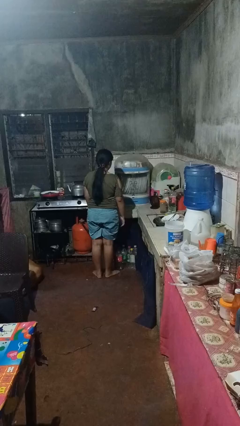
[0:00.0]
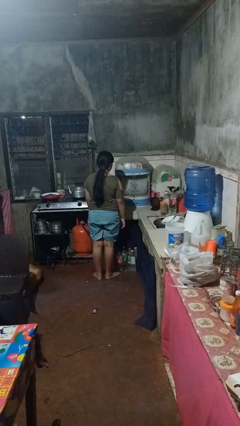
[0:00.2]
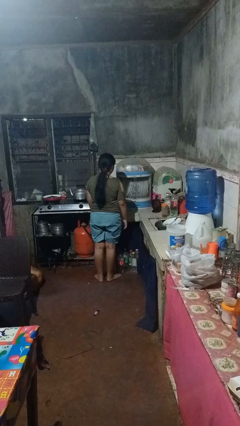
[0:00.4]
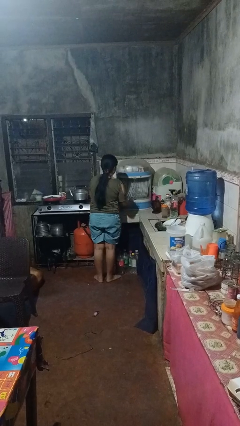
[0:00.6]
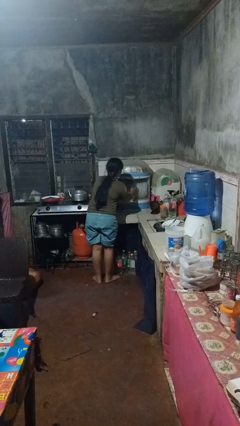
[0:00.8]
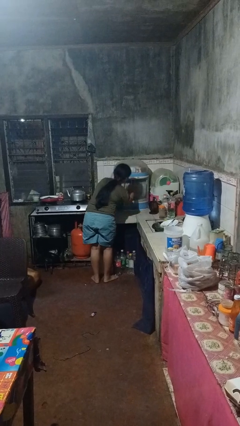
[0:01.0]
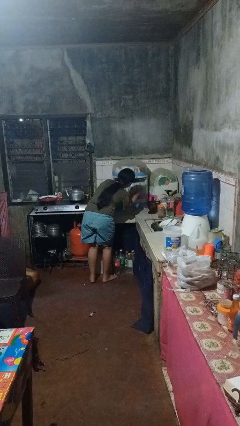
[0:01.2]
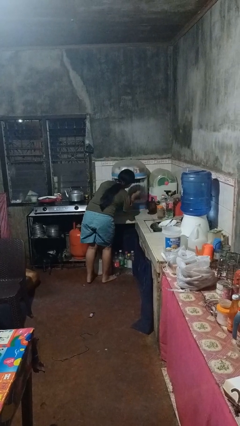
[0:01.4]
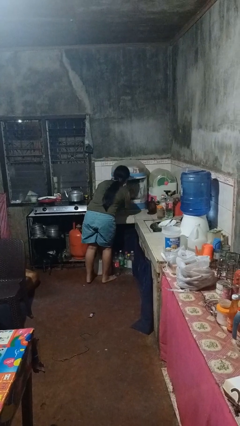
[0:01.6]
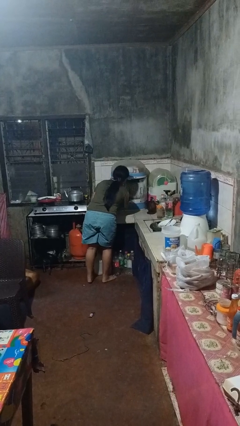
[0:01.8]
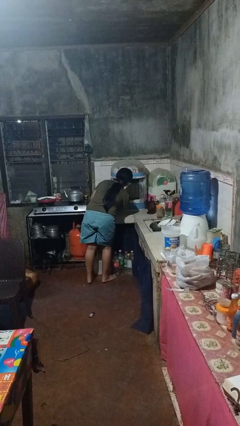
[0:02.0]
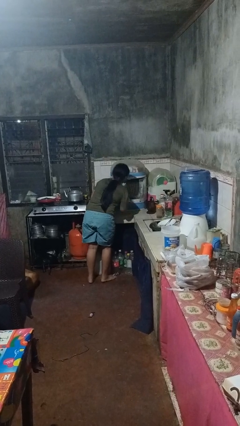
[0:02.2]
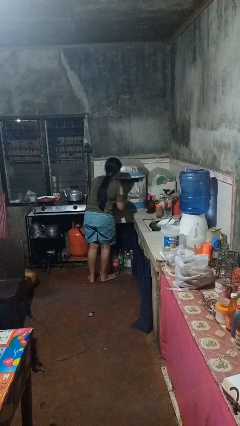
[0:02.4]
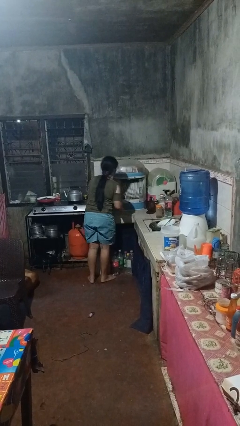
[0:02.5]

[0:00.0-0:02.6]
person searches in kitchen drawer

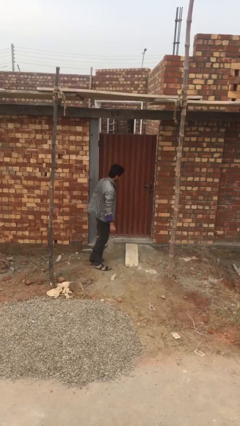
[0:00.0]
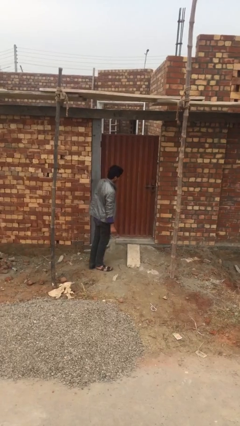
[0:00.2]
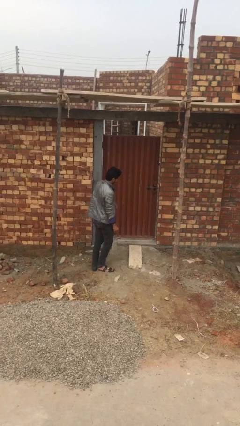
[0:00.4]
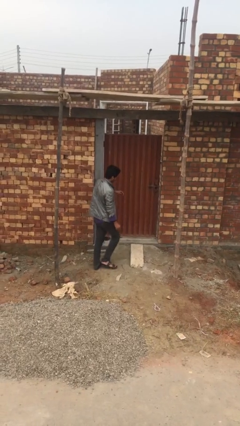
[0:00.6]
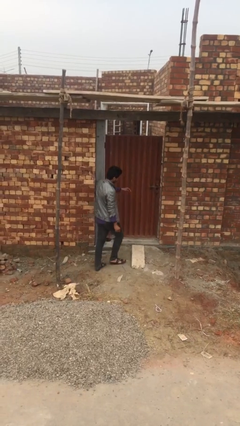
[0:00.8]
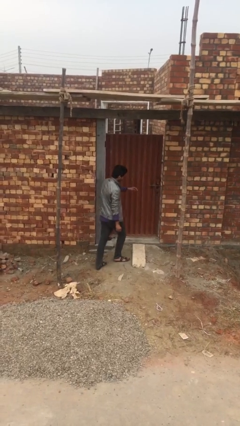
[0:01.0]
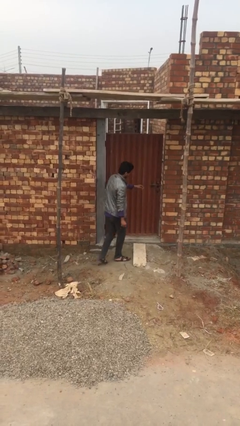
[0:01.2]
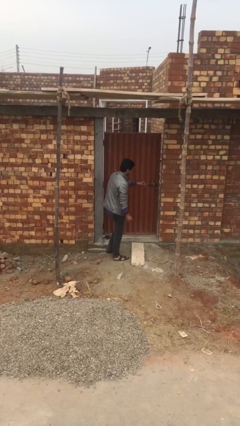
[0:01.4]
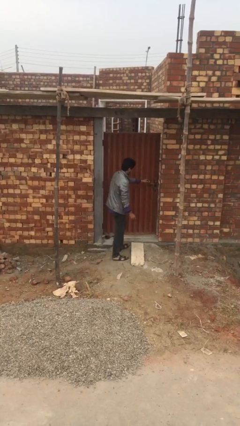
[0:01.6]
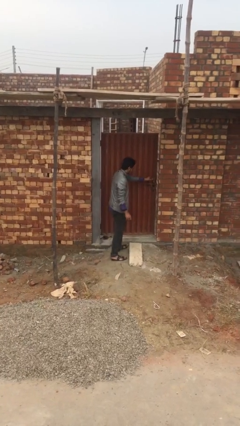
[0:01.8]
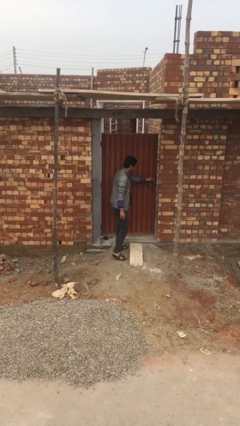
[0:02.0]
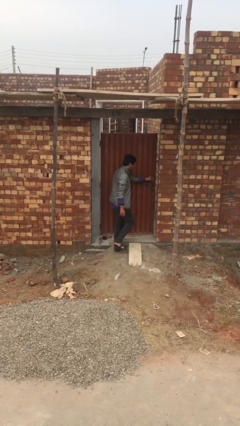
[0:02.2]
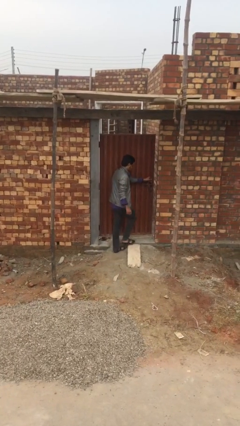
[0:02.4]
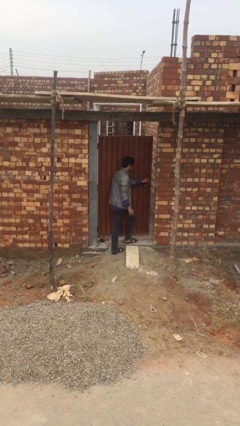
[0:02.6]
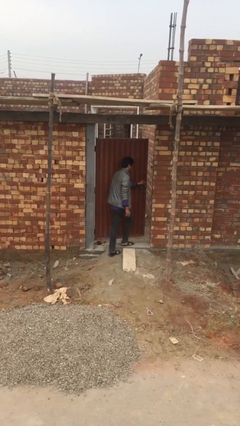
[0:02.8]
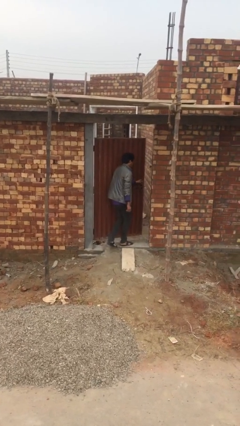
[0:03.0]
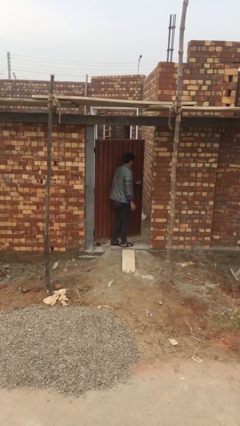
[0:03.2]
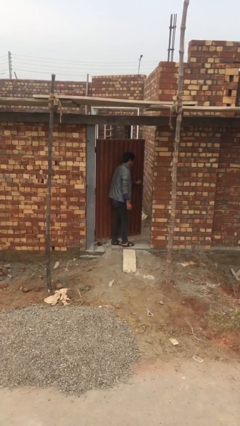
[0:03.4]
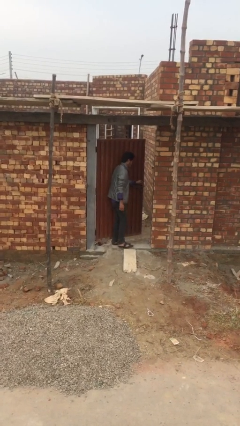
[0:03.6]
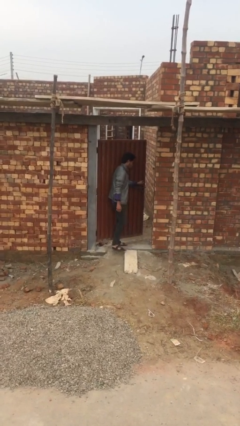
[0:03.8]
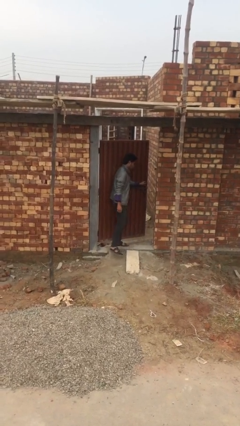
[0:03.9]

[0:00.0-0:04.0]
person opens facility door

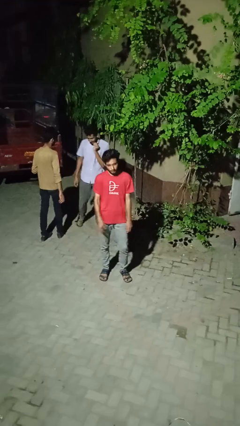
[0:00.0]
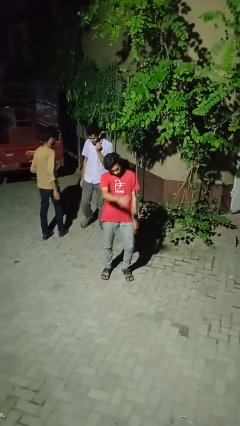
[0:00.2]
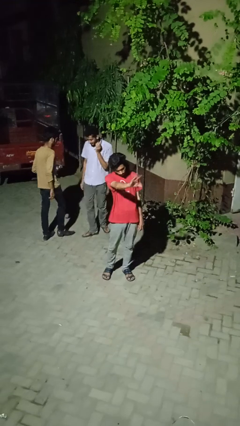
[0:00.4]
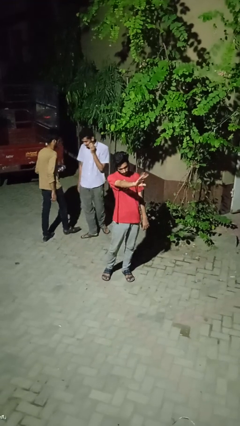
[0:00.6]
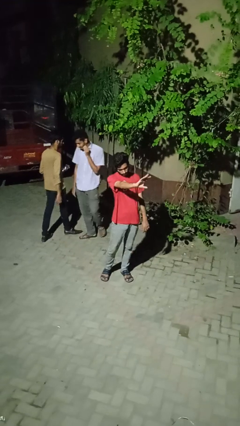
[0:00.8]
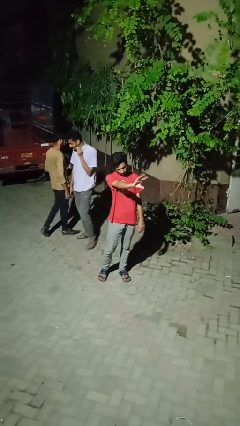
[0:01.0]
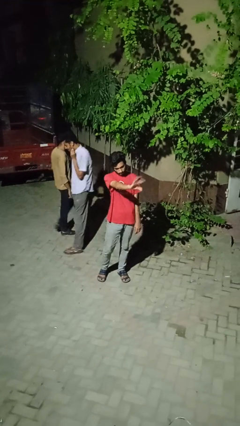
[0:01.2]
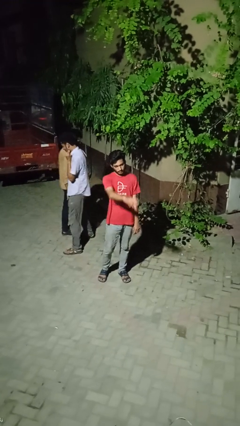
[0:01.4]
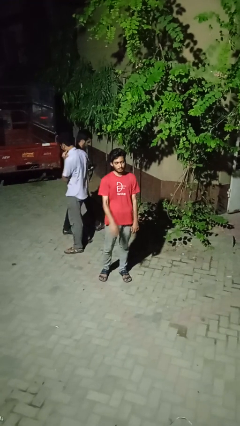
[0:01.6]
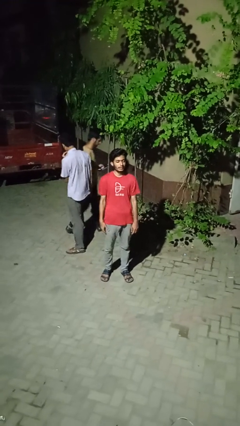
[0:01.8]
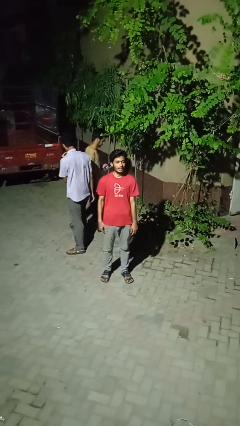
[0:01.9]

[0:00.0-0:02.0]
person waves at person

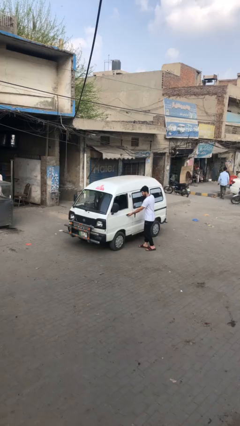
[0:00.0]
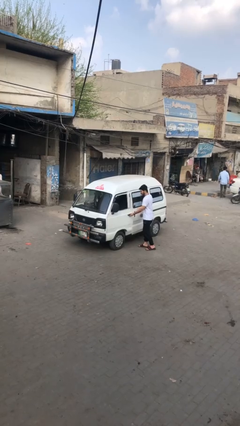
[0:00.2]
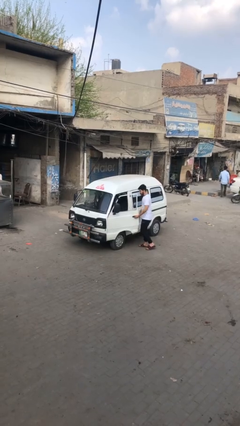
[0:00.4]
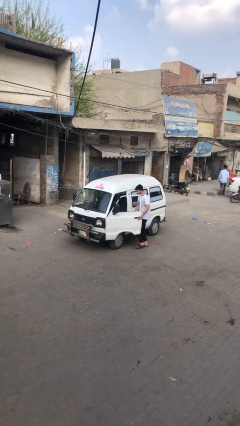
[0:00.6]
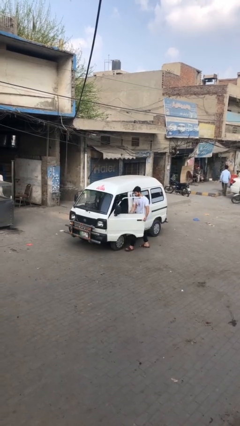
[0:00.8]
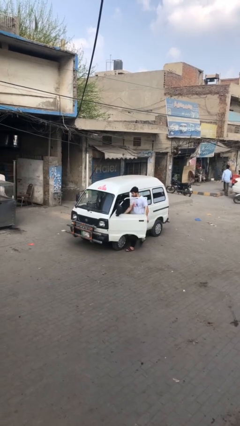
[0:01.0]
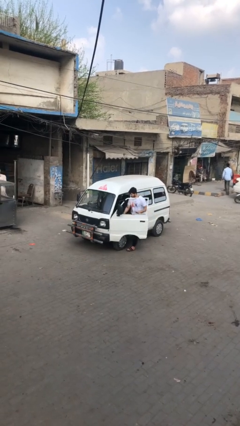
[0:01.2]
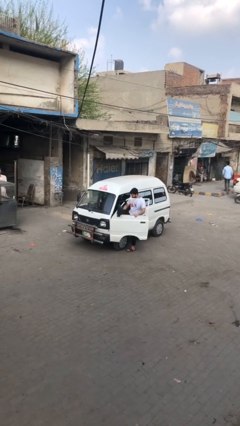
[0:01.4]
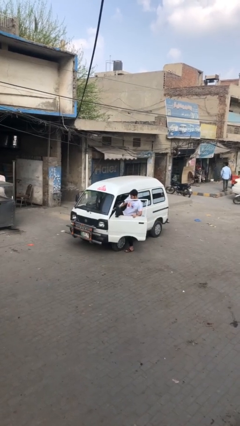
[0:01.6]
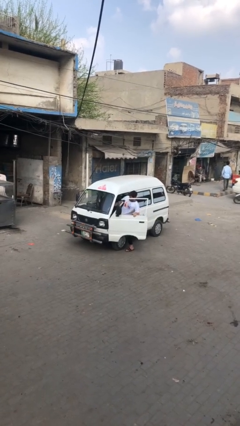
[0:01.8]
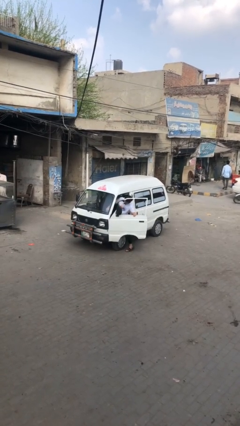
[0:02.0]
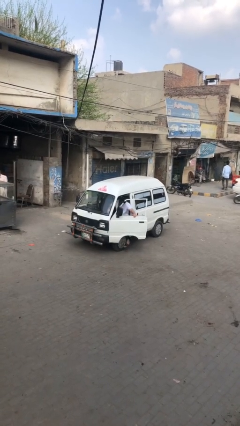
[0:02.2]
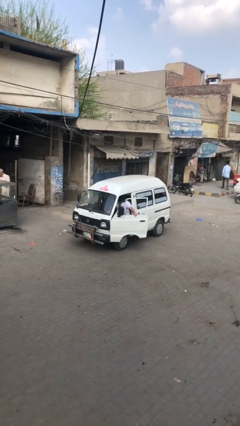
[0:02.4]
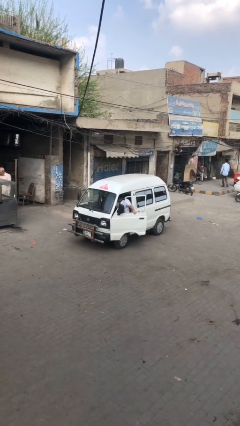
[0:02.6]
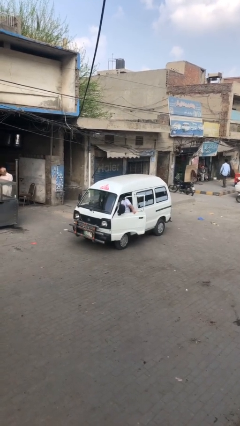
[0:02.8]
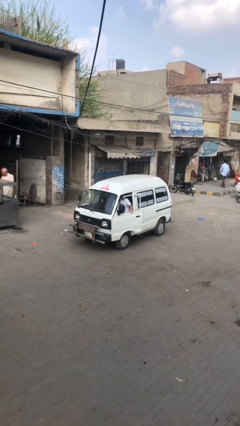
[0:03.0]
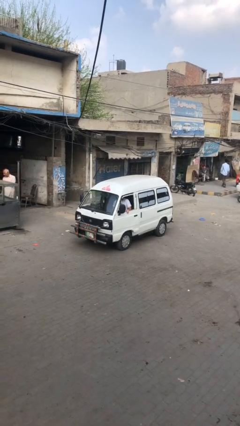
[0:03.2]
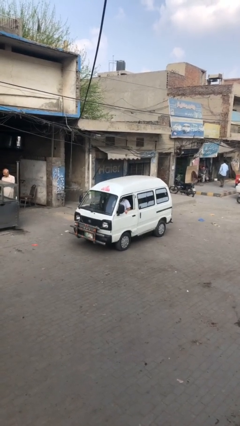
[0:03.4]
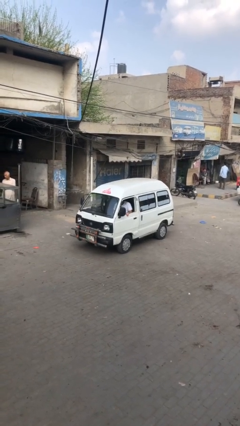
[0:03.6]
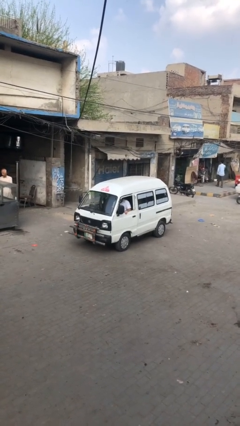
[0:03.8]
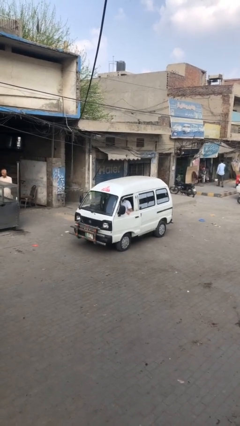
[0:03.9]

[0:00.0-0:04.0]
car picks up person

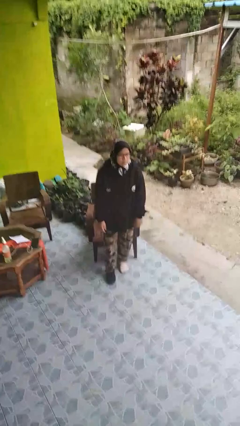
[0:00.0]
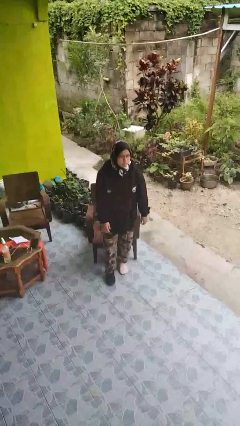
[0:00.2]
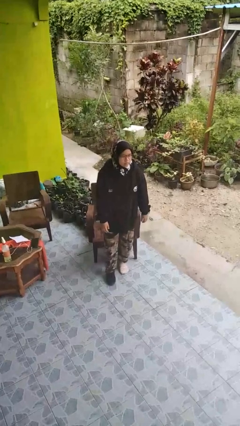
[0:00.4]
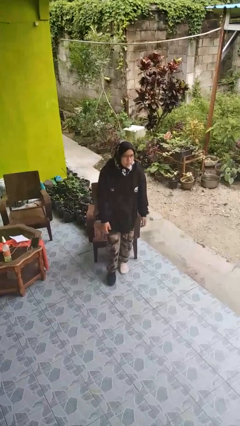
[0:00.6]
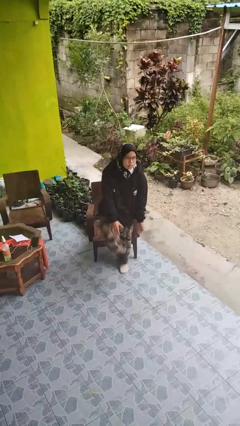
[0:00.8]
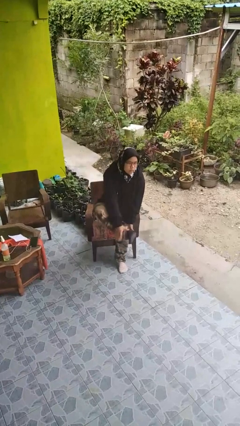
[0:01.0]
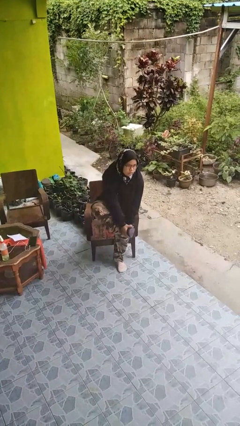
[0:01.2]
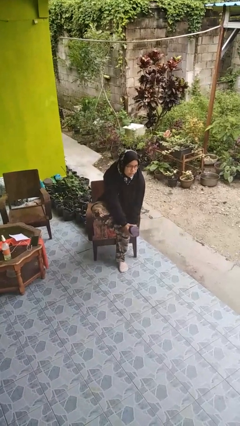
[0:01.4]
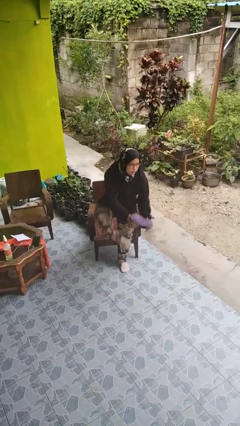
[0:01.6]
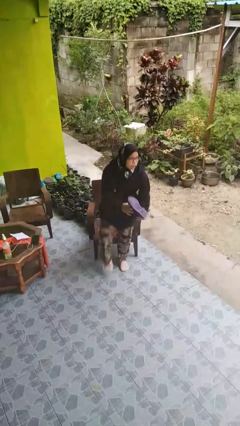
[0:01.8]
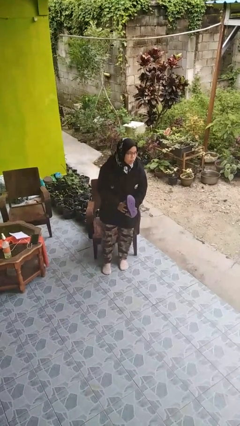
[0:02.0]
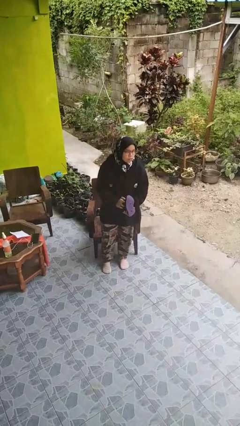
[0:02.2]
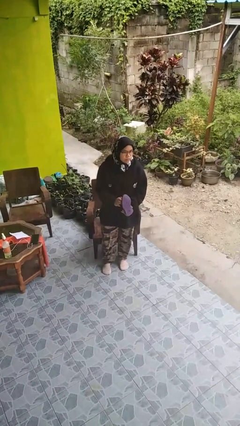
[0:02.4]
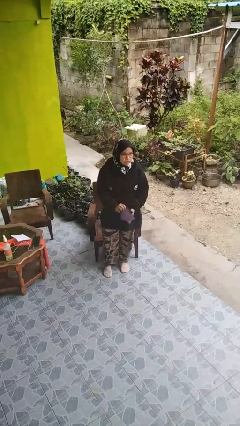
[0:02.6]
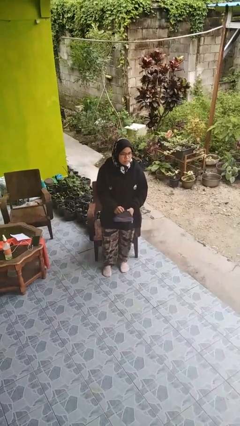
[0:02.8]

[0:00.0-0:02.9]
person takes off shoes

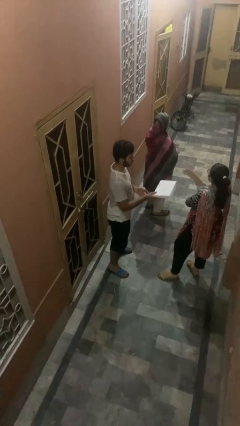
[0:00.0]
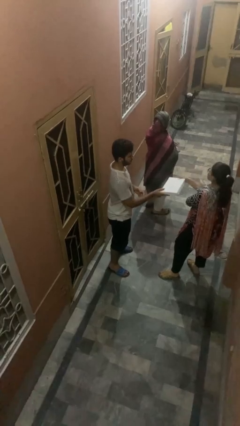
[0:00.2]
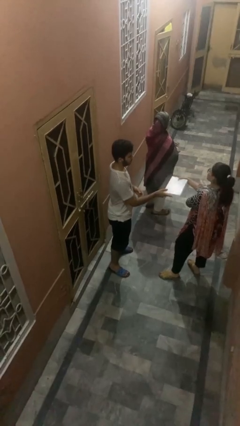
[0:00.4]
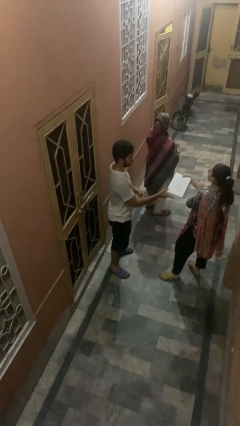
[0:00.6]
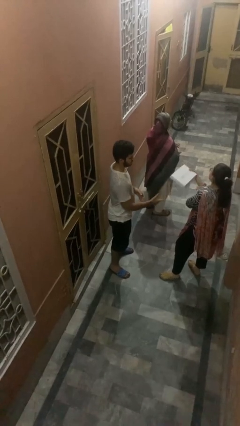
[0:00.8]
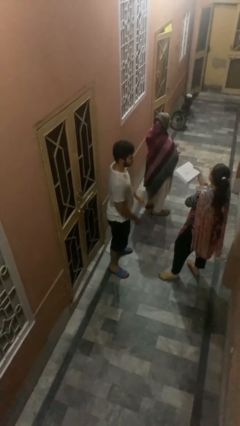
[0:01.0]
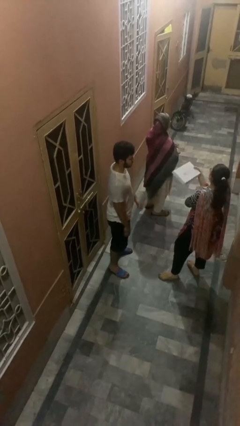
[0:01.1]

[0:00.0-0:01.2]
person transfers object to person

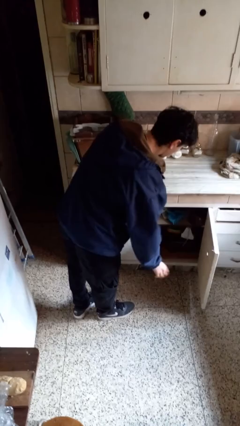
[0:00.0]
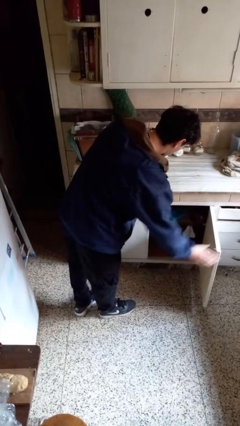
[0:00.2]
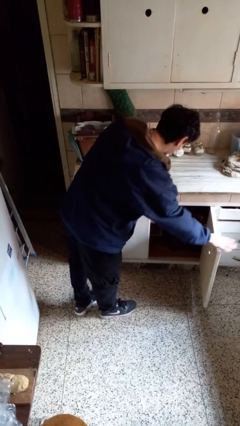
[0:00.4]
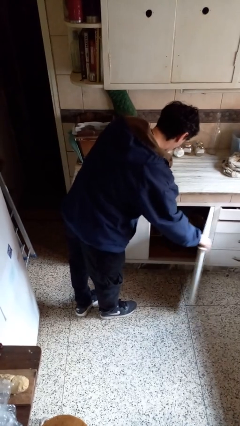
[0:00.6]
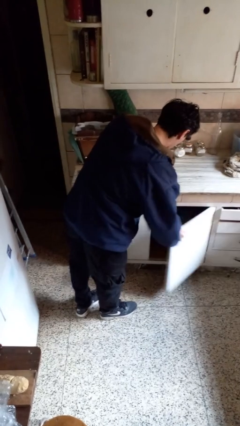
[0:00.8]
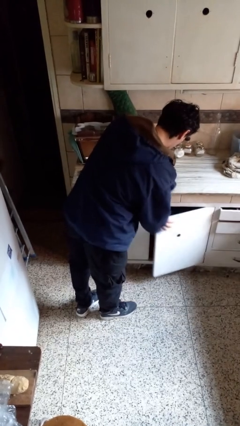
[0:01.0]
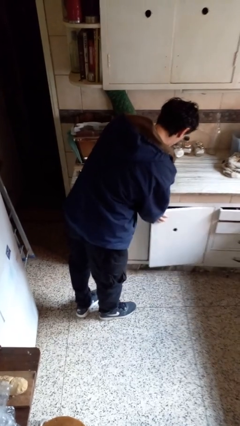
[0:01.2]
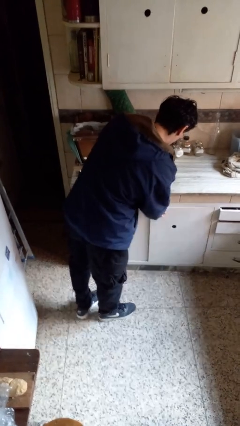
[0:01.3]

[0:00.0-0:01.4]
person closes cabinet
